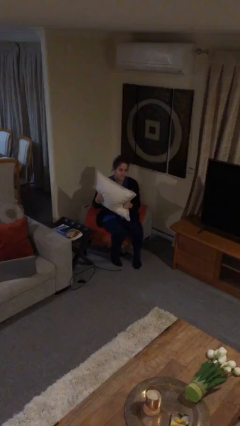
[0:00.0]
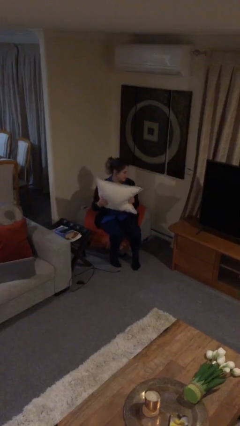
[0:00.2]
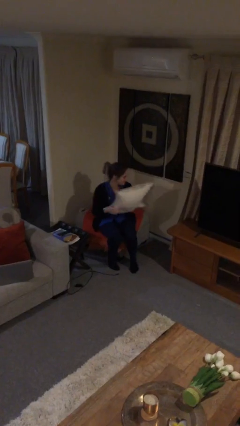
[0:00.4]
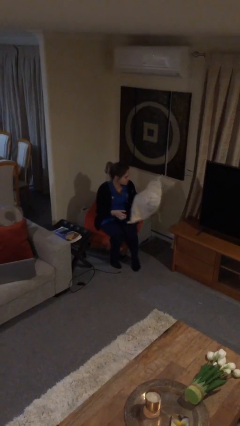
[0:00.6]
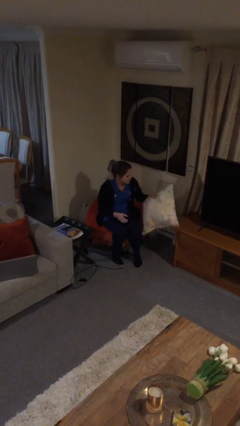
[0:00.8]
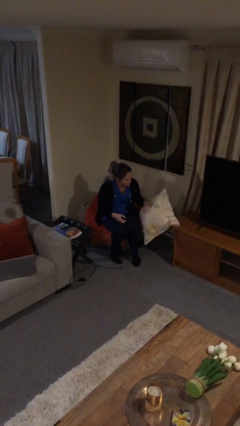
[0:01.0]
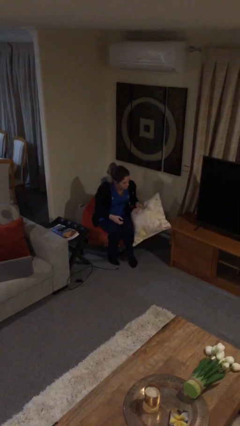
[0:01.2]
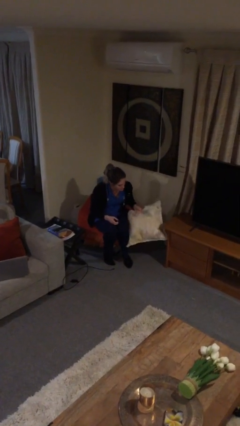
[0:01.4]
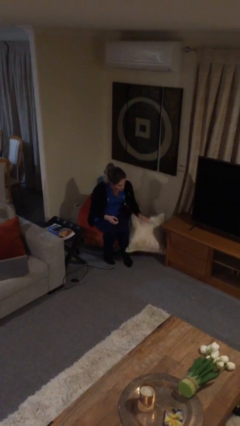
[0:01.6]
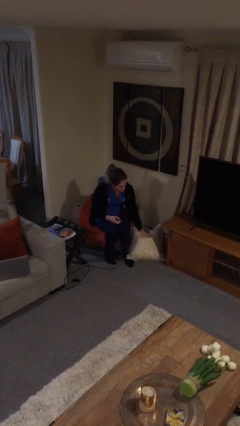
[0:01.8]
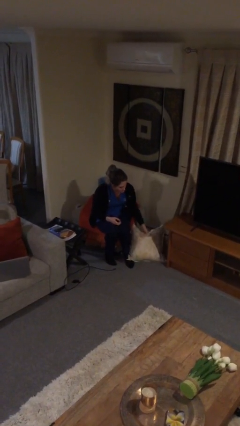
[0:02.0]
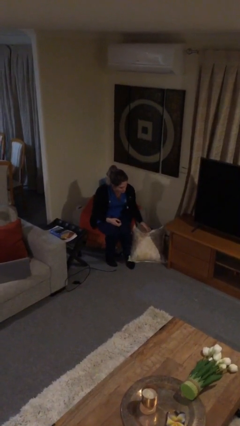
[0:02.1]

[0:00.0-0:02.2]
person puts down object on floor

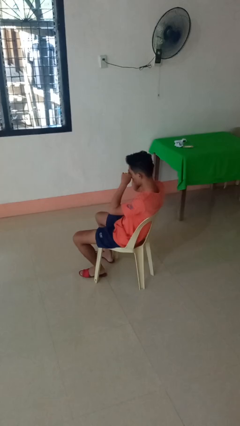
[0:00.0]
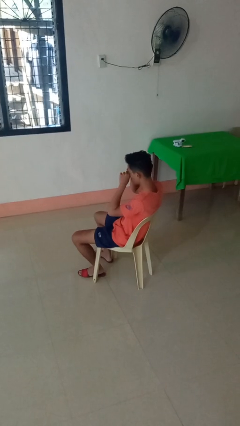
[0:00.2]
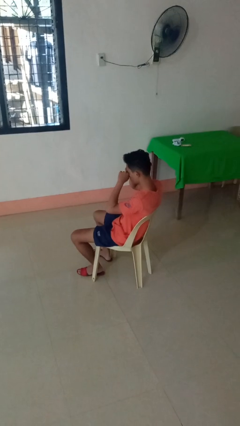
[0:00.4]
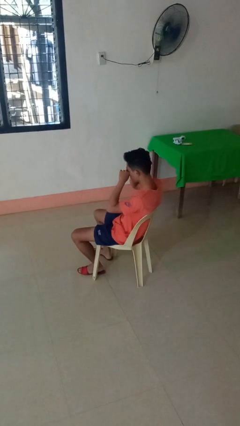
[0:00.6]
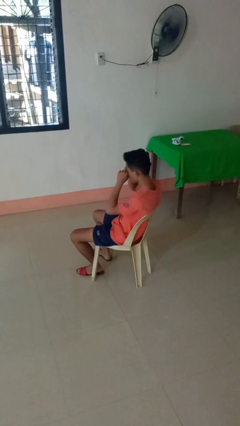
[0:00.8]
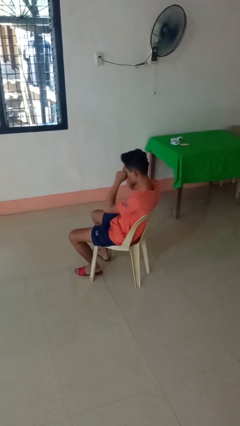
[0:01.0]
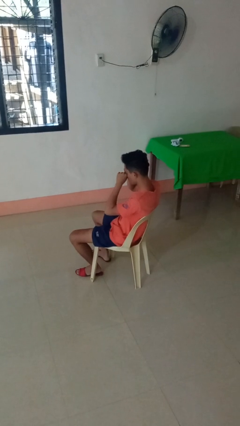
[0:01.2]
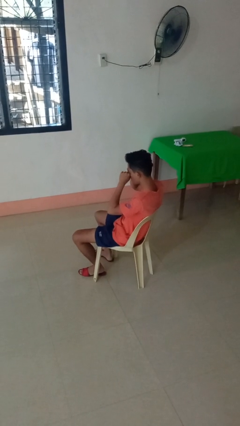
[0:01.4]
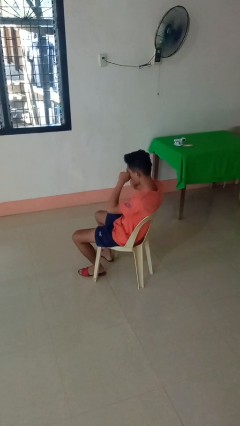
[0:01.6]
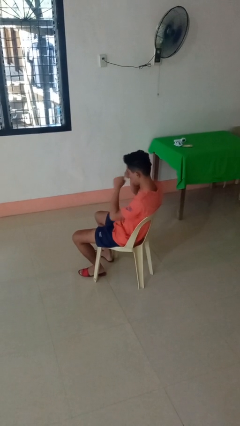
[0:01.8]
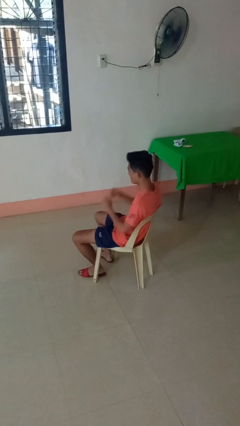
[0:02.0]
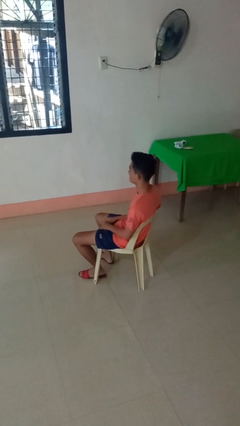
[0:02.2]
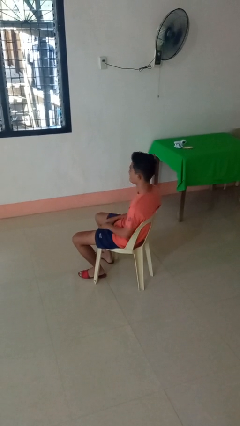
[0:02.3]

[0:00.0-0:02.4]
person rubs eyes

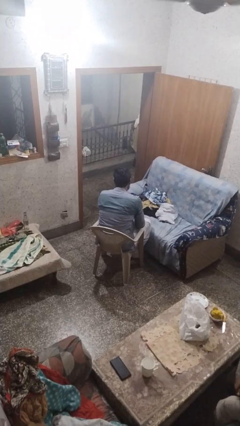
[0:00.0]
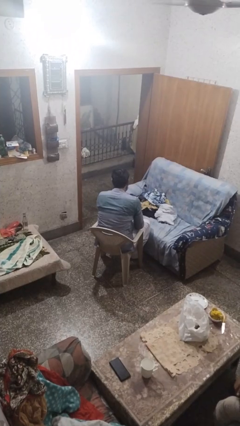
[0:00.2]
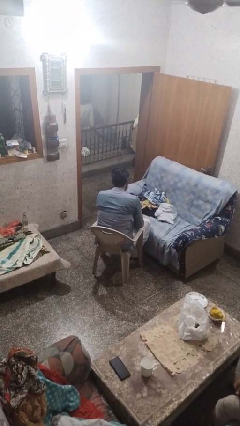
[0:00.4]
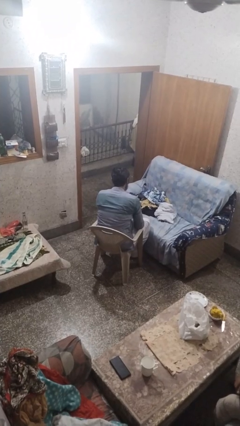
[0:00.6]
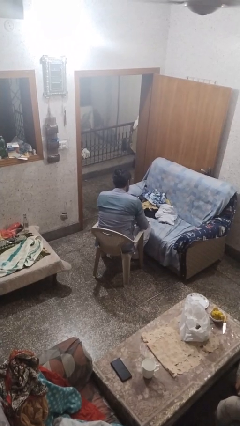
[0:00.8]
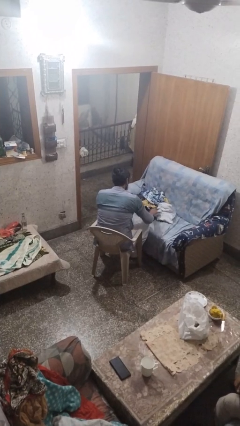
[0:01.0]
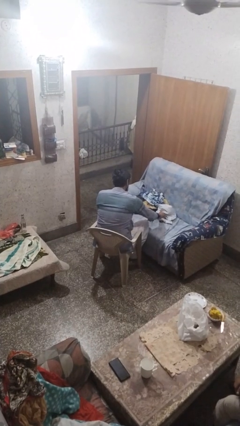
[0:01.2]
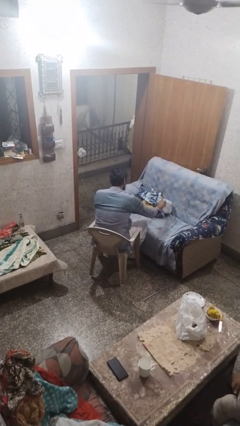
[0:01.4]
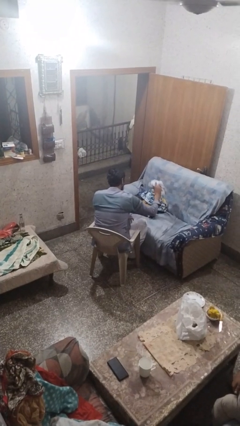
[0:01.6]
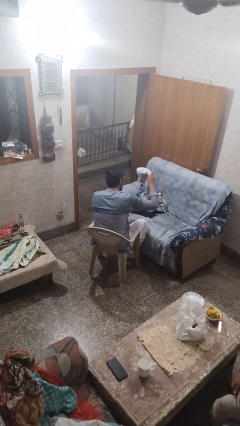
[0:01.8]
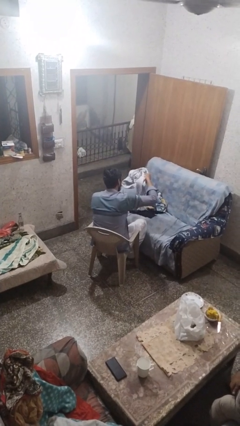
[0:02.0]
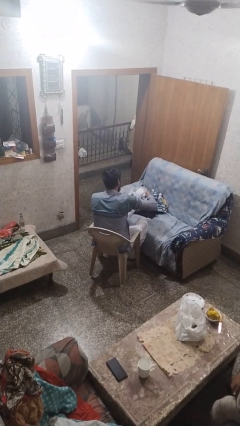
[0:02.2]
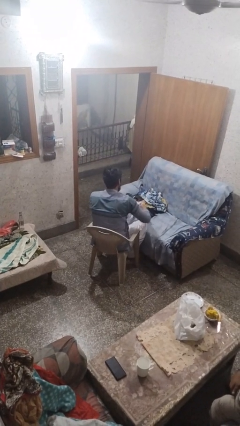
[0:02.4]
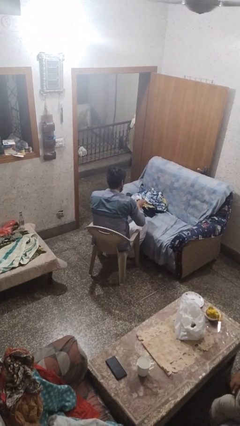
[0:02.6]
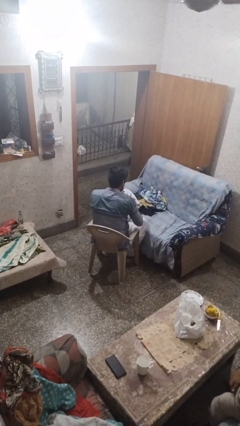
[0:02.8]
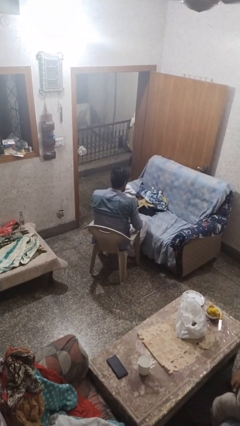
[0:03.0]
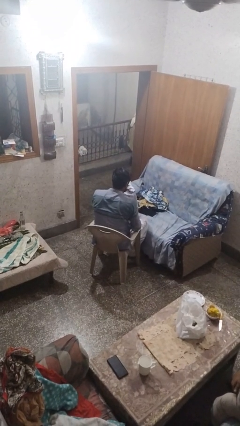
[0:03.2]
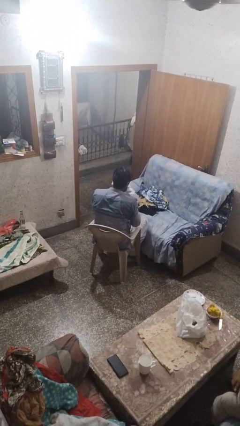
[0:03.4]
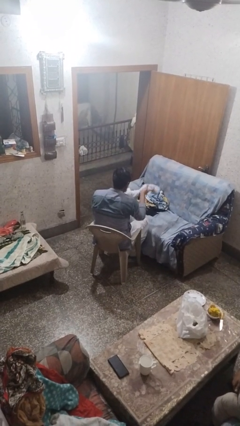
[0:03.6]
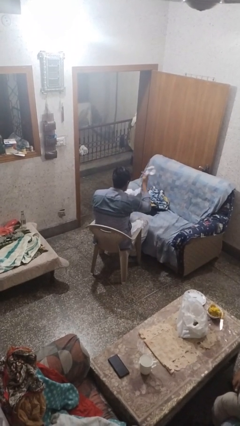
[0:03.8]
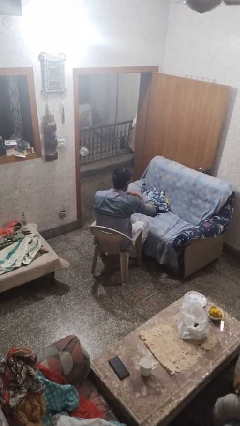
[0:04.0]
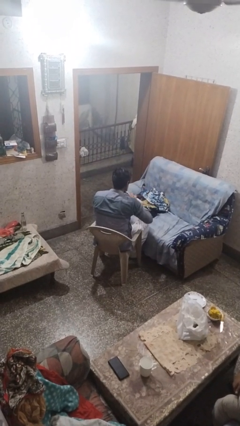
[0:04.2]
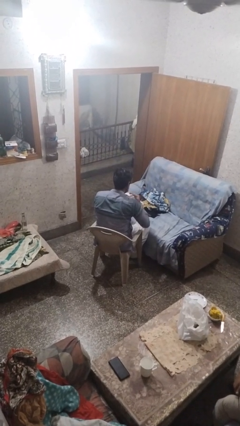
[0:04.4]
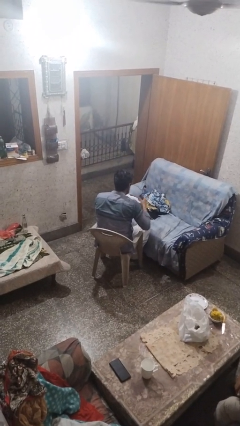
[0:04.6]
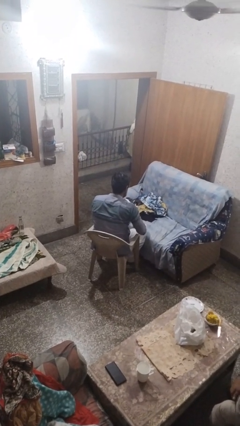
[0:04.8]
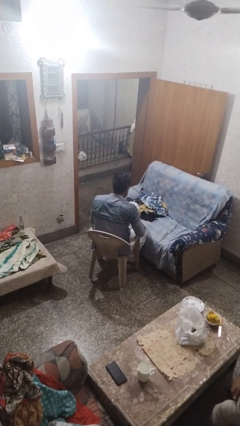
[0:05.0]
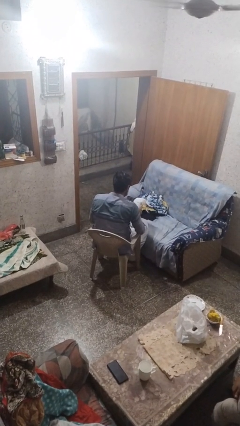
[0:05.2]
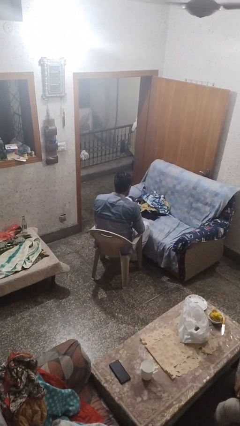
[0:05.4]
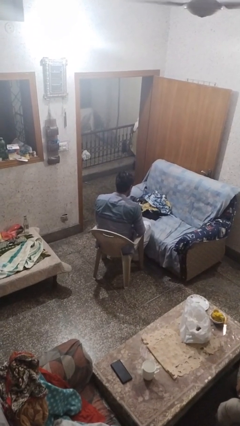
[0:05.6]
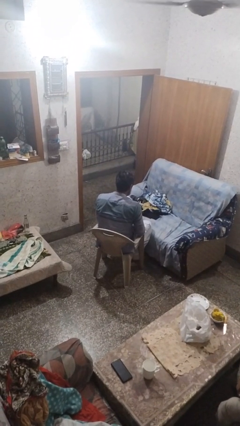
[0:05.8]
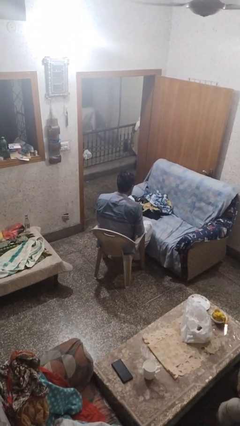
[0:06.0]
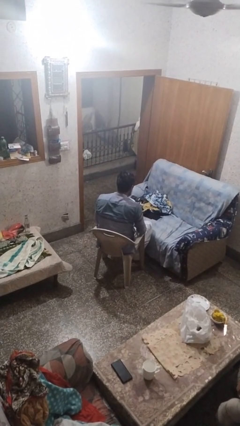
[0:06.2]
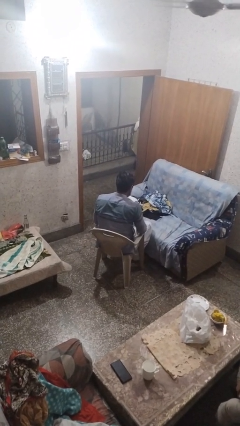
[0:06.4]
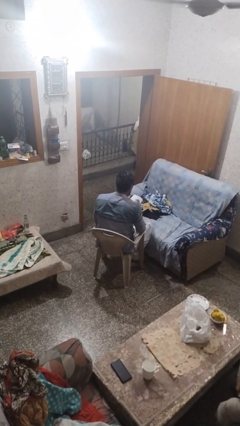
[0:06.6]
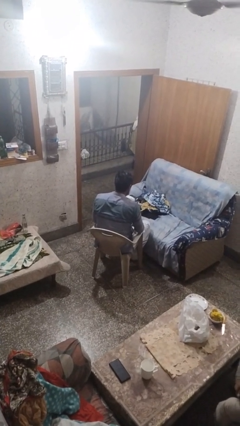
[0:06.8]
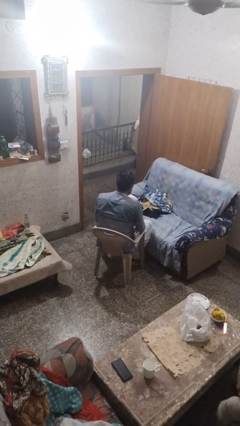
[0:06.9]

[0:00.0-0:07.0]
person folds shirt

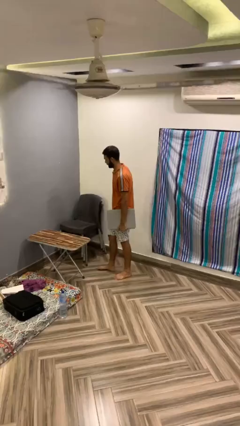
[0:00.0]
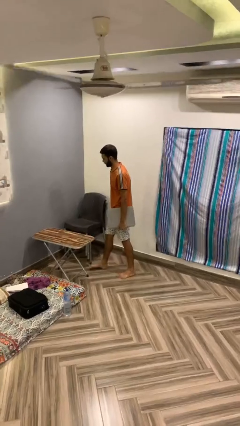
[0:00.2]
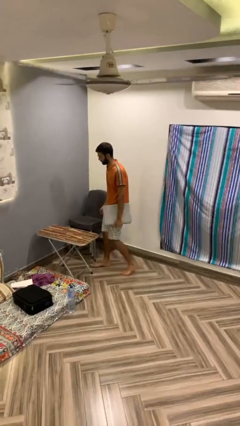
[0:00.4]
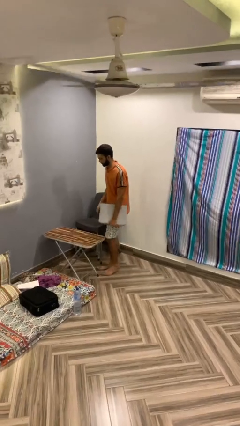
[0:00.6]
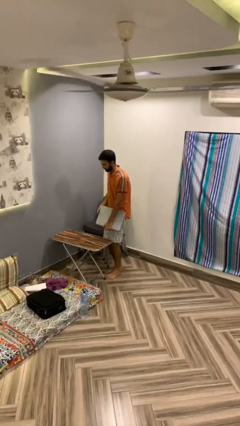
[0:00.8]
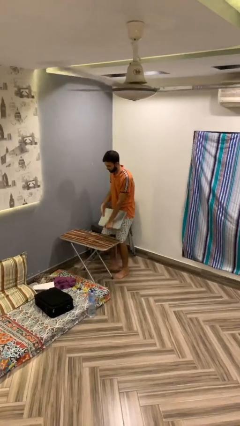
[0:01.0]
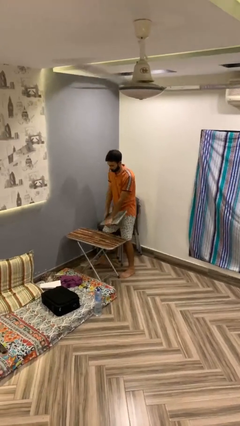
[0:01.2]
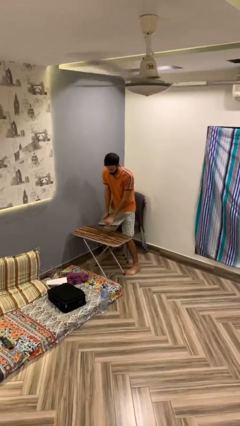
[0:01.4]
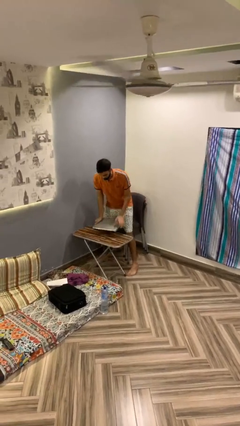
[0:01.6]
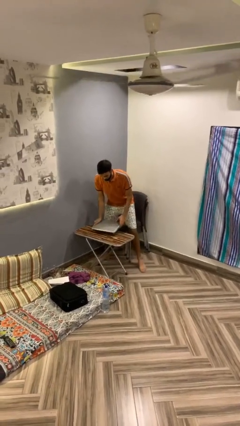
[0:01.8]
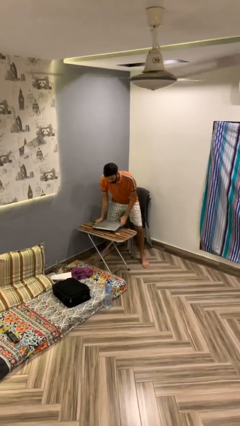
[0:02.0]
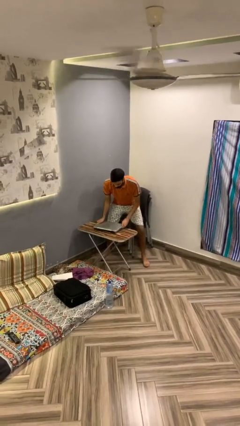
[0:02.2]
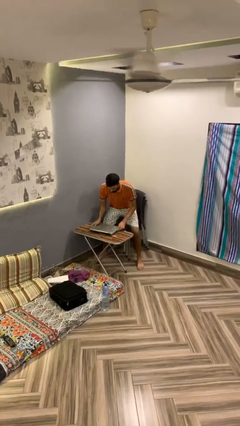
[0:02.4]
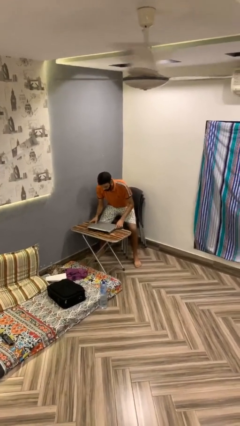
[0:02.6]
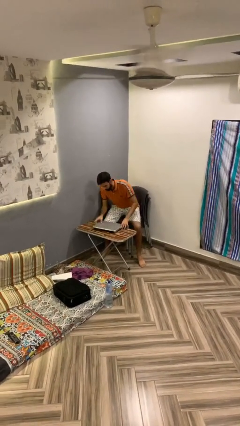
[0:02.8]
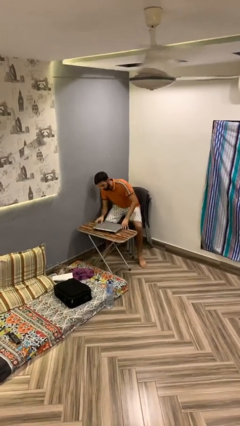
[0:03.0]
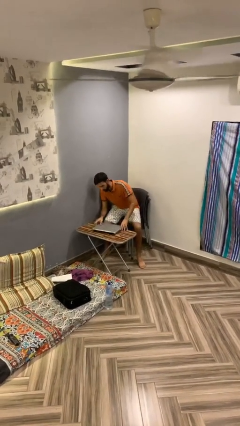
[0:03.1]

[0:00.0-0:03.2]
person sits down

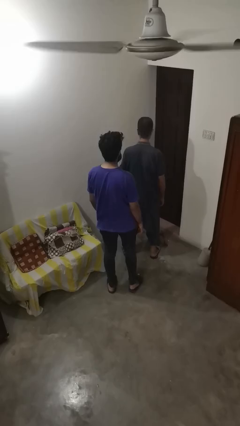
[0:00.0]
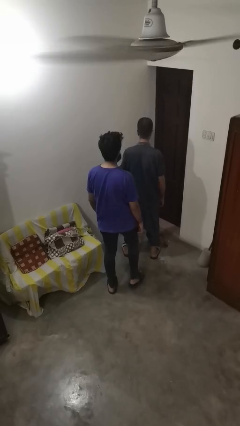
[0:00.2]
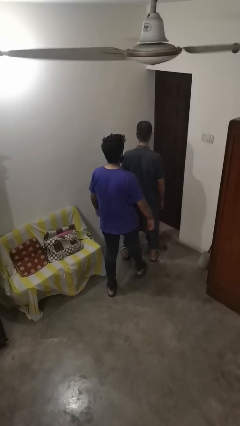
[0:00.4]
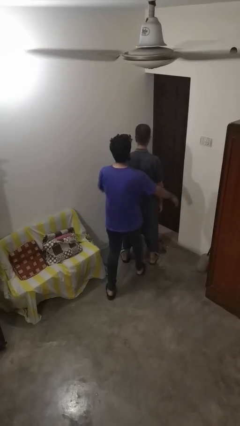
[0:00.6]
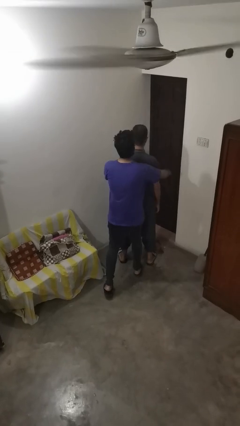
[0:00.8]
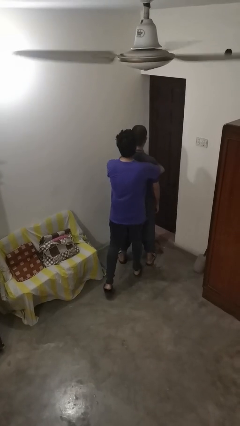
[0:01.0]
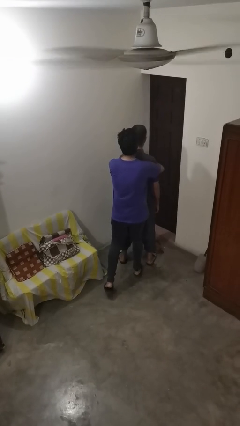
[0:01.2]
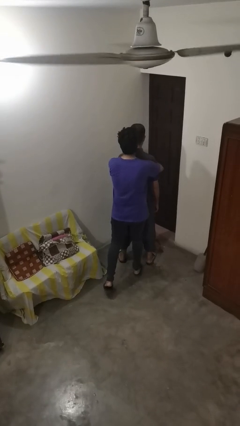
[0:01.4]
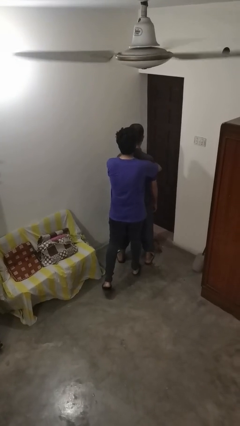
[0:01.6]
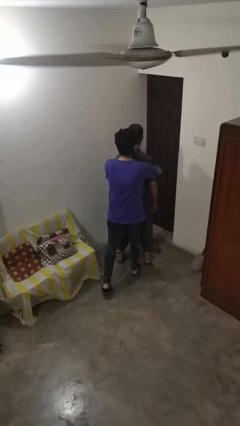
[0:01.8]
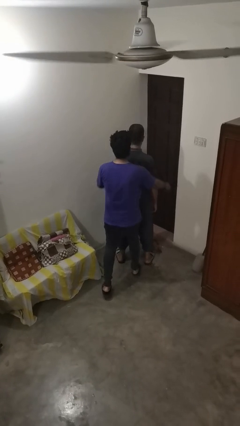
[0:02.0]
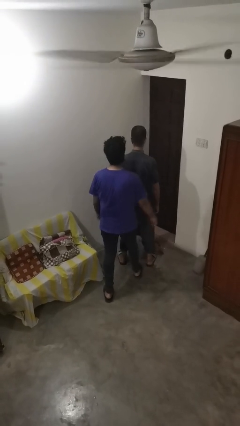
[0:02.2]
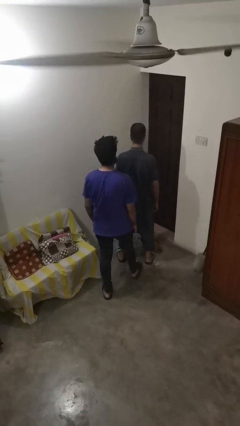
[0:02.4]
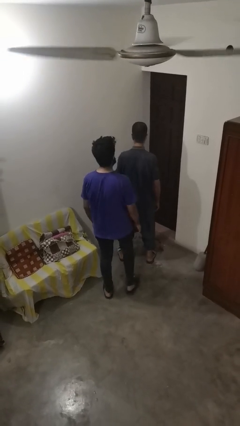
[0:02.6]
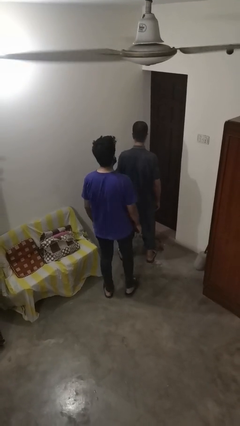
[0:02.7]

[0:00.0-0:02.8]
person hugs person from behind
